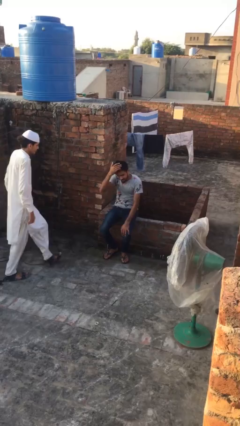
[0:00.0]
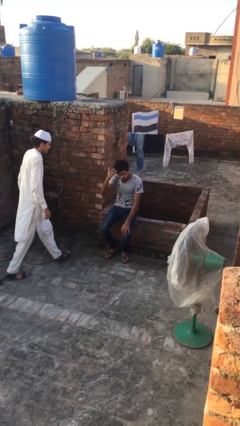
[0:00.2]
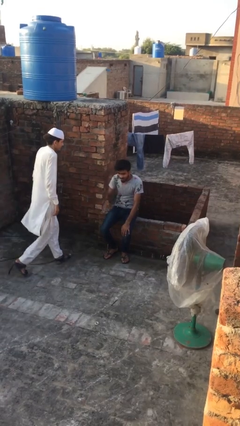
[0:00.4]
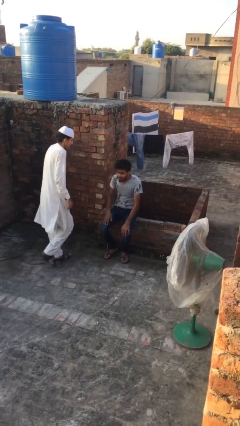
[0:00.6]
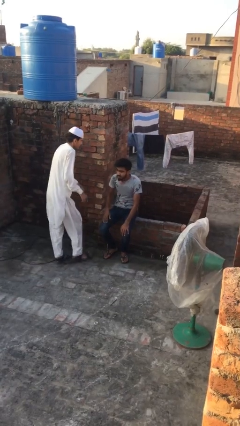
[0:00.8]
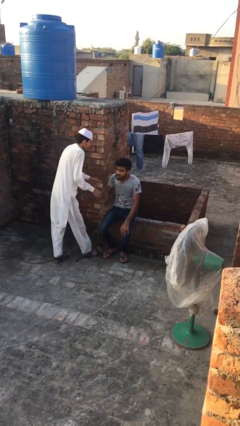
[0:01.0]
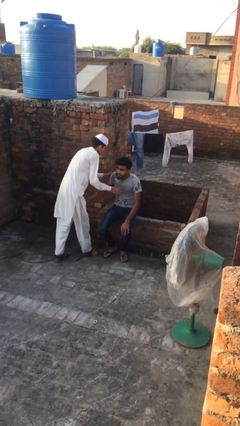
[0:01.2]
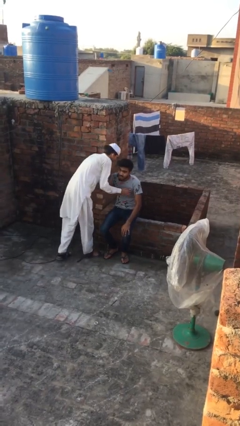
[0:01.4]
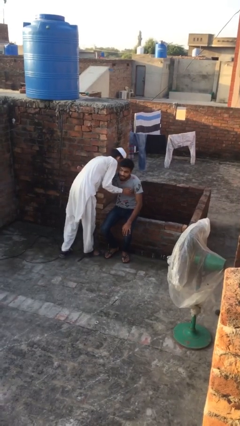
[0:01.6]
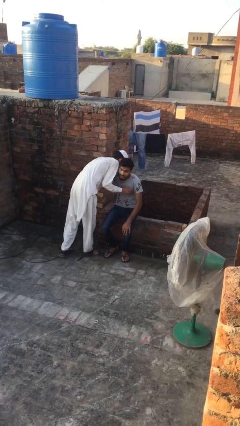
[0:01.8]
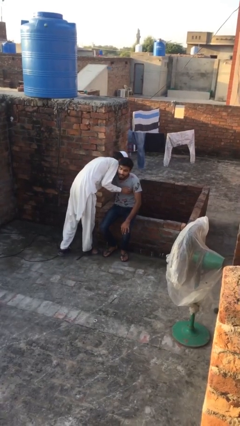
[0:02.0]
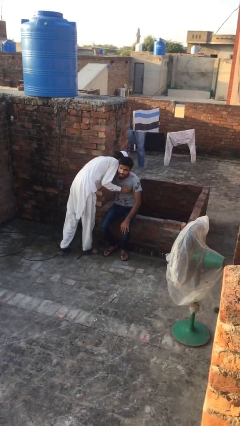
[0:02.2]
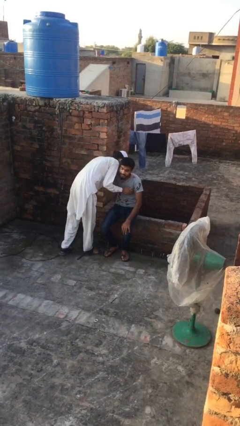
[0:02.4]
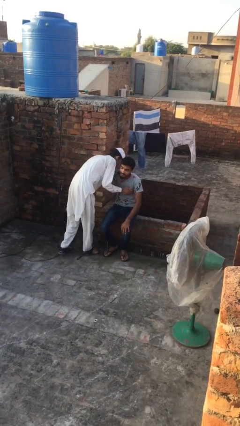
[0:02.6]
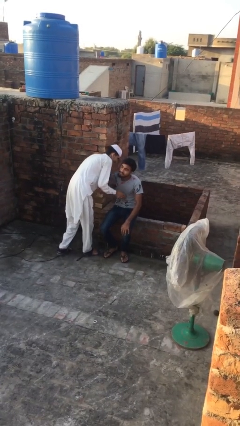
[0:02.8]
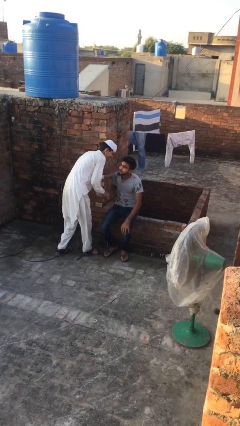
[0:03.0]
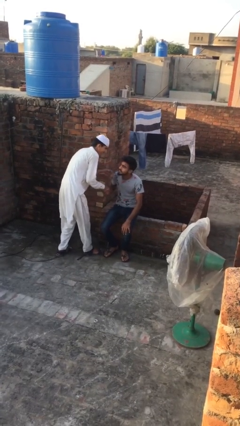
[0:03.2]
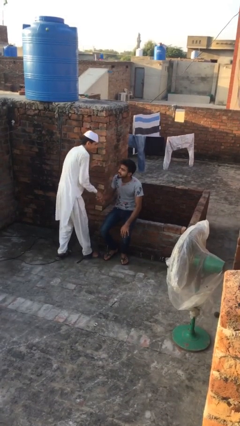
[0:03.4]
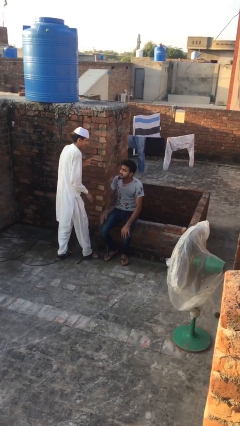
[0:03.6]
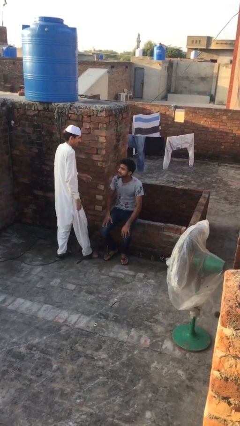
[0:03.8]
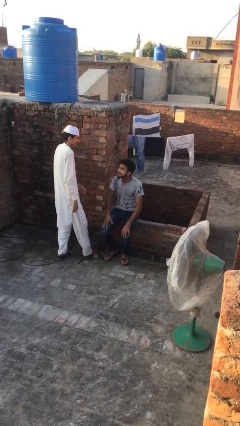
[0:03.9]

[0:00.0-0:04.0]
person embraces person

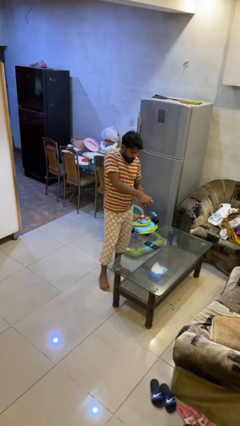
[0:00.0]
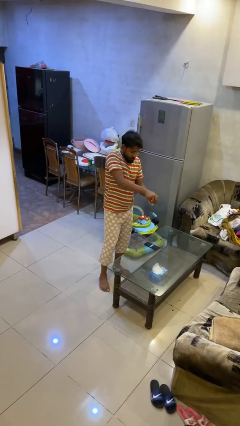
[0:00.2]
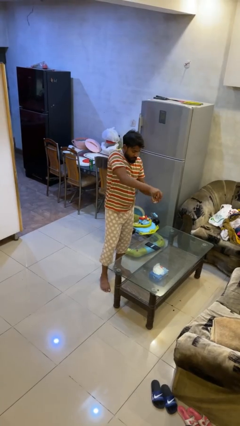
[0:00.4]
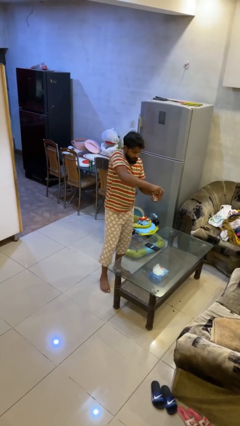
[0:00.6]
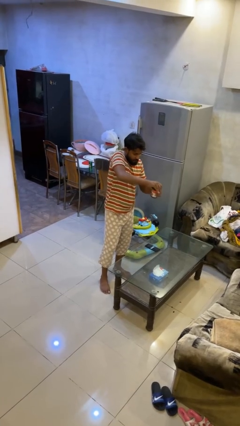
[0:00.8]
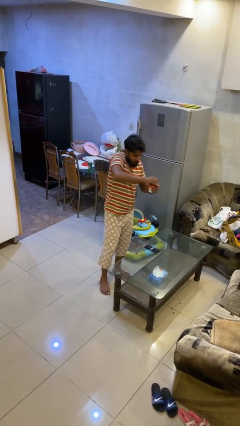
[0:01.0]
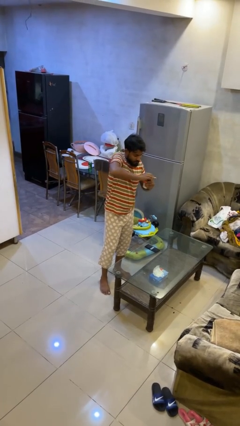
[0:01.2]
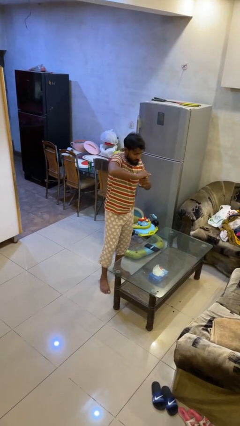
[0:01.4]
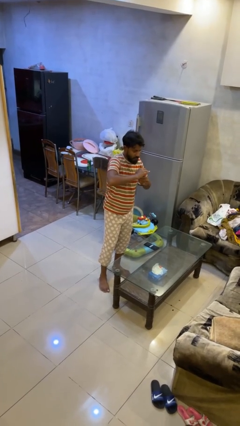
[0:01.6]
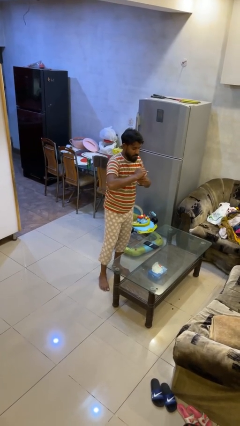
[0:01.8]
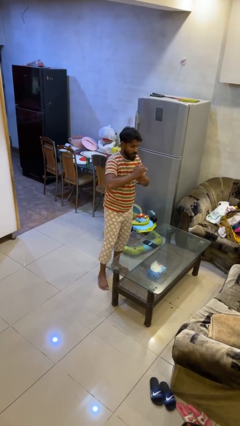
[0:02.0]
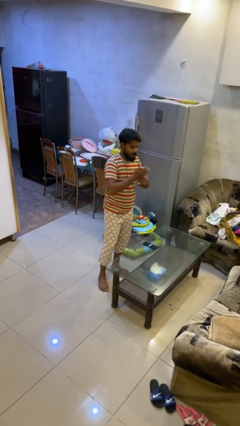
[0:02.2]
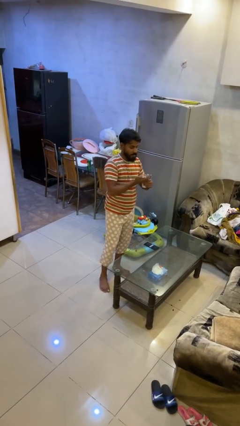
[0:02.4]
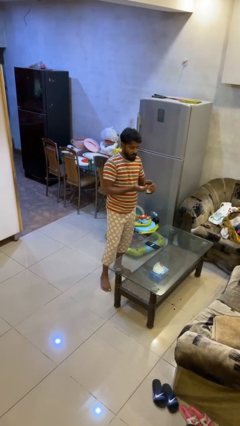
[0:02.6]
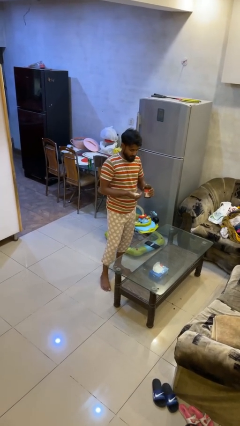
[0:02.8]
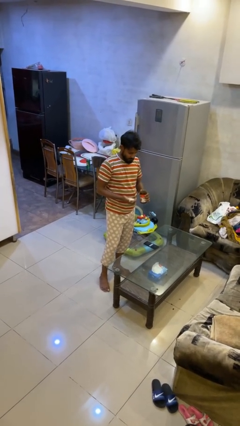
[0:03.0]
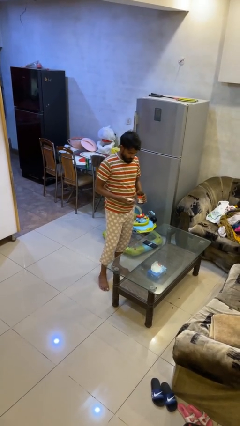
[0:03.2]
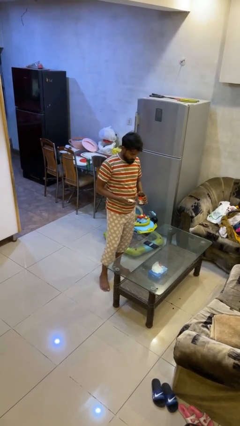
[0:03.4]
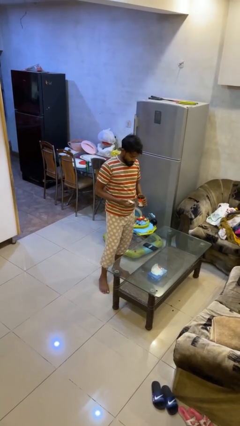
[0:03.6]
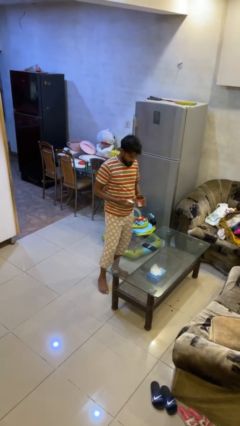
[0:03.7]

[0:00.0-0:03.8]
person opens jar

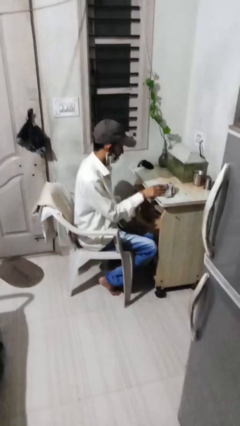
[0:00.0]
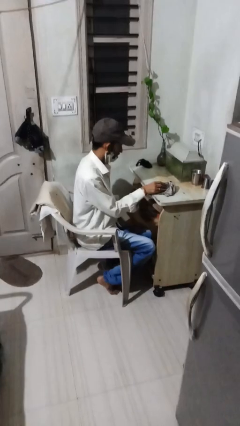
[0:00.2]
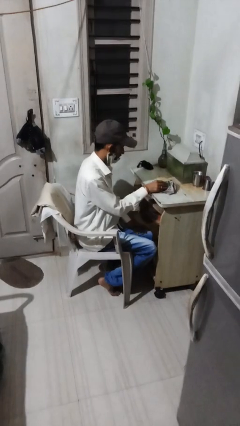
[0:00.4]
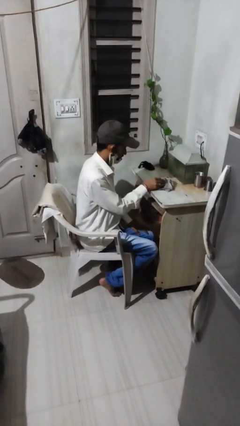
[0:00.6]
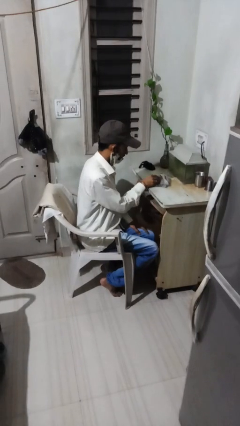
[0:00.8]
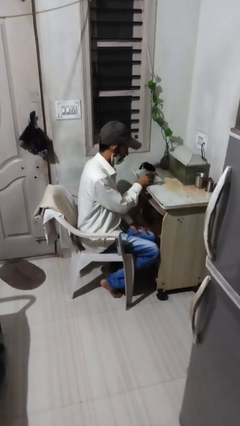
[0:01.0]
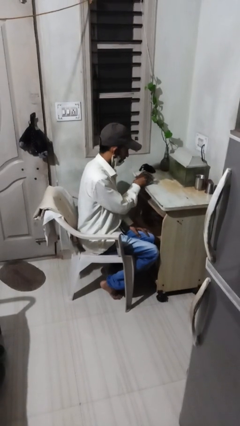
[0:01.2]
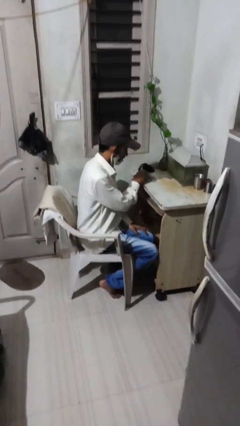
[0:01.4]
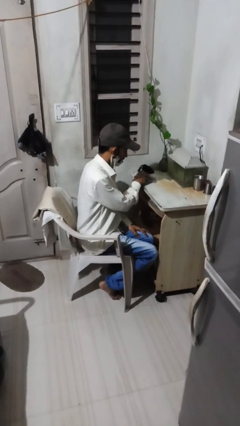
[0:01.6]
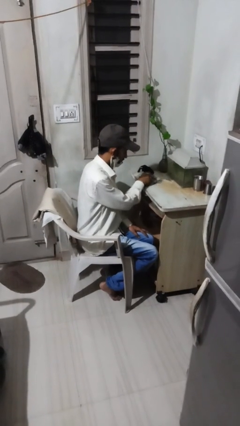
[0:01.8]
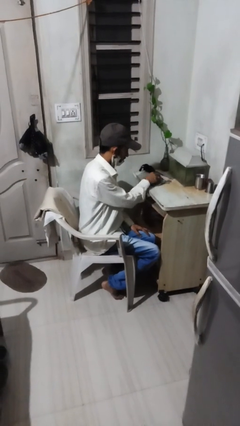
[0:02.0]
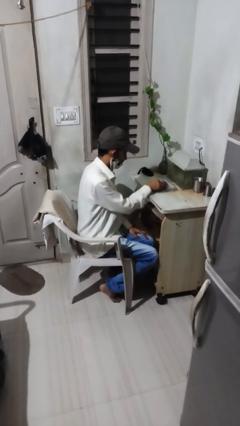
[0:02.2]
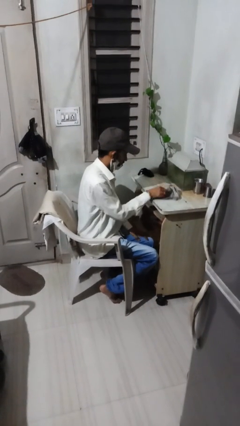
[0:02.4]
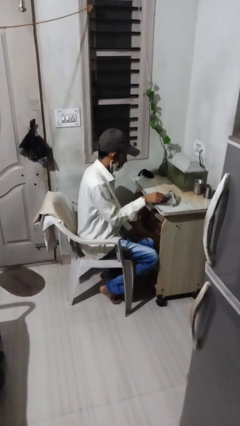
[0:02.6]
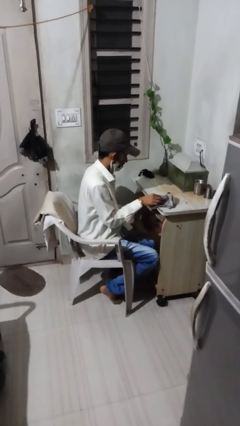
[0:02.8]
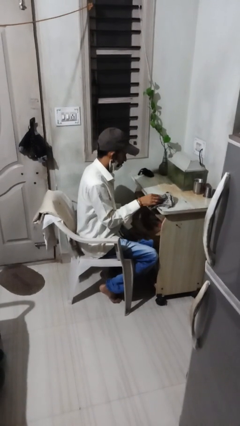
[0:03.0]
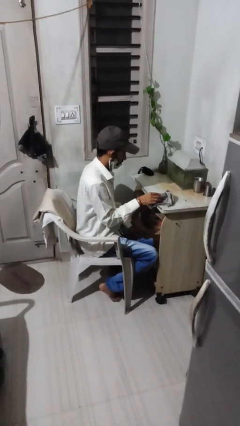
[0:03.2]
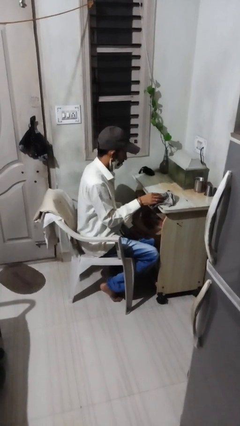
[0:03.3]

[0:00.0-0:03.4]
person cleans table with rag

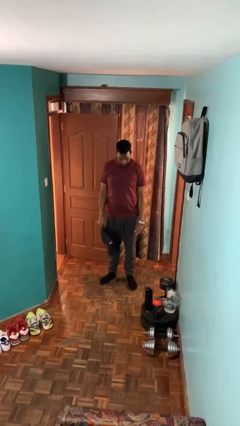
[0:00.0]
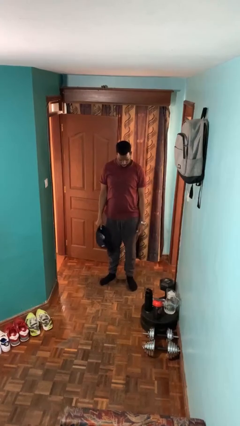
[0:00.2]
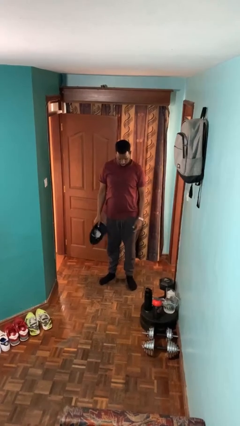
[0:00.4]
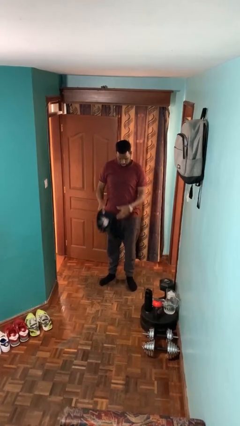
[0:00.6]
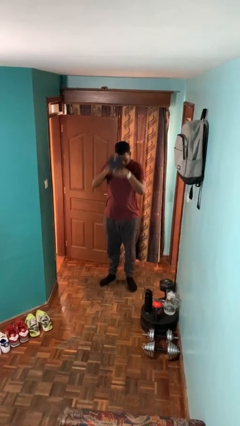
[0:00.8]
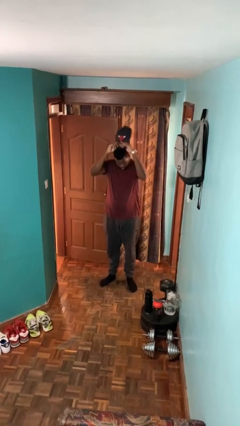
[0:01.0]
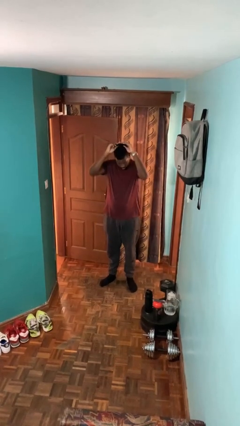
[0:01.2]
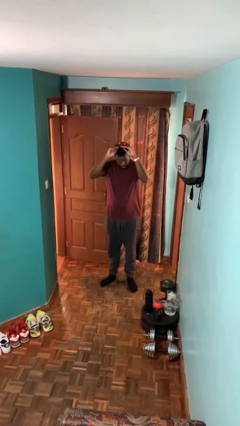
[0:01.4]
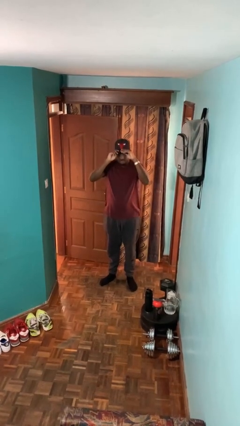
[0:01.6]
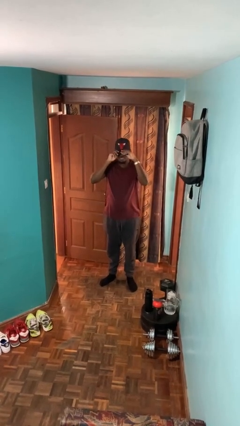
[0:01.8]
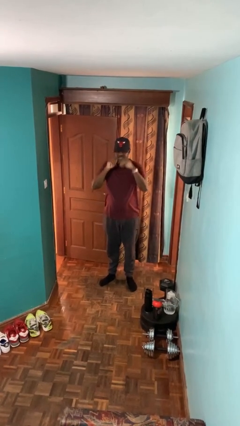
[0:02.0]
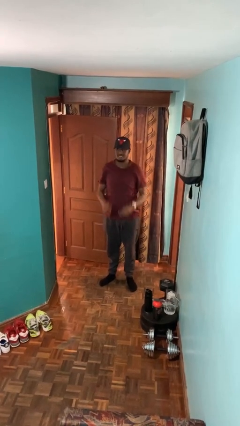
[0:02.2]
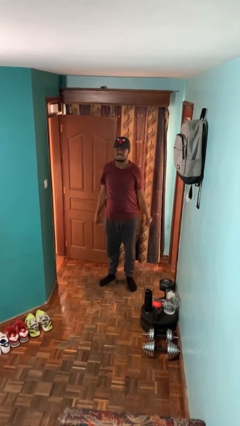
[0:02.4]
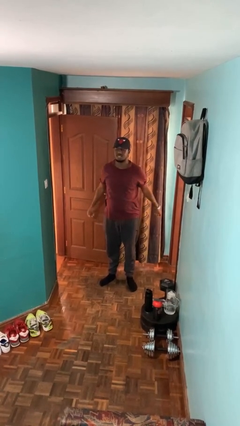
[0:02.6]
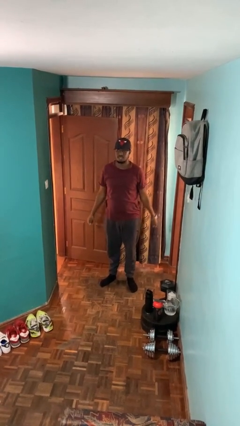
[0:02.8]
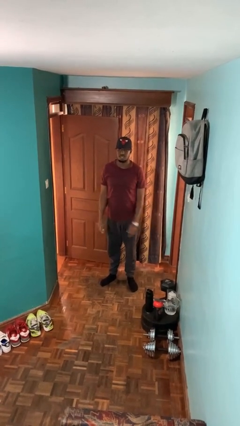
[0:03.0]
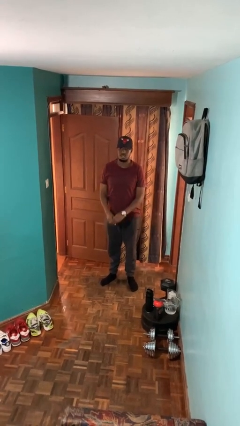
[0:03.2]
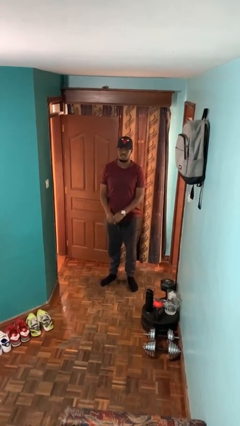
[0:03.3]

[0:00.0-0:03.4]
person puts on hat

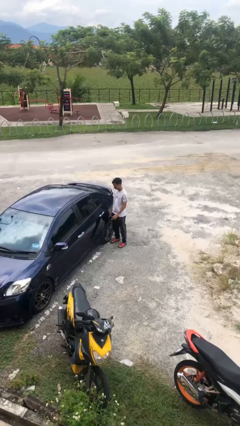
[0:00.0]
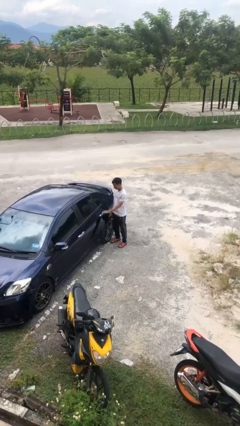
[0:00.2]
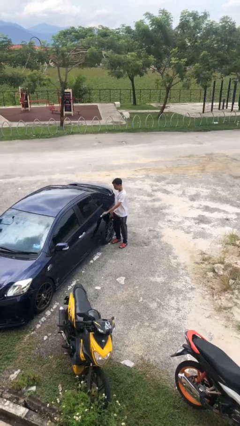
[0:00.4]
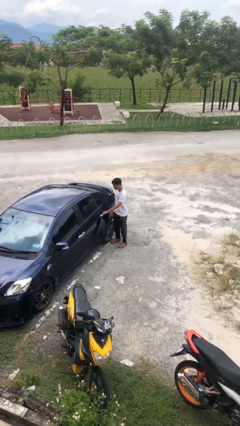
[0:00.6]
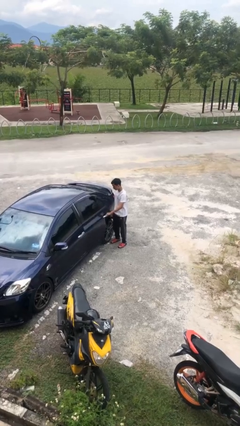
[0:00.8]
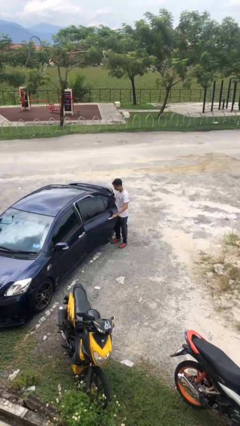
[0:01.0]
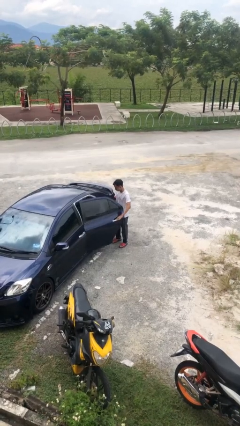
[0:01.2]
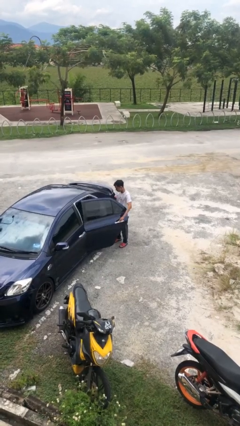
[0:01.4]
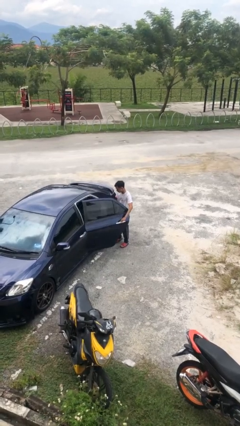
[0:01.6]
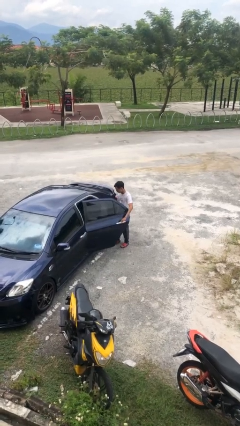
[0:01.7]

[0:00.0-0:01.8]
person opens car door

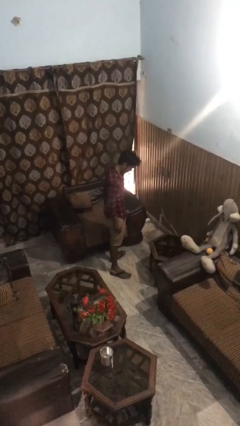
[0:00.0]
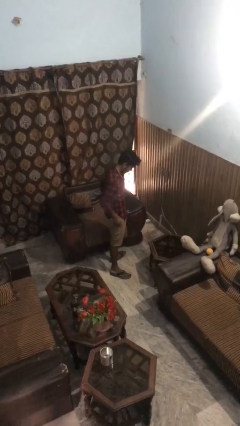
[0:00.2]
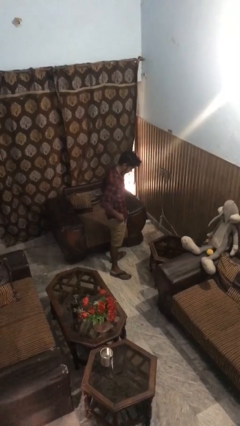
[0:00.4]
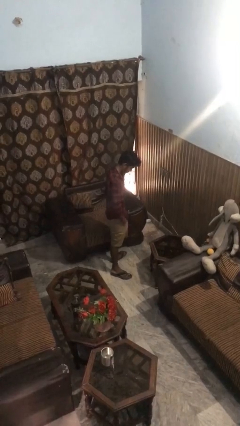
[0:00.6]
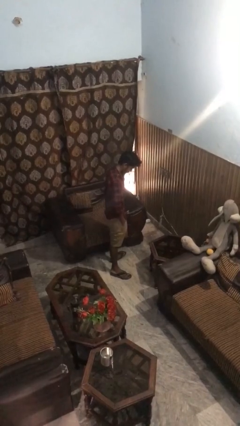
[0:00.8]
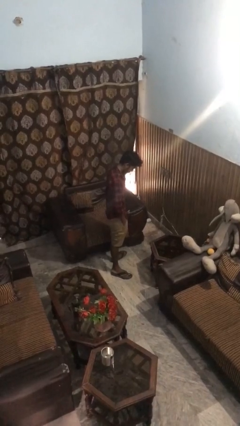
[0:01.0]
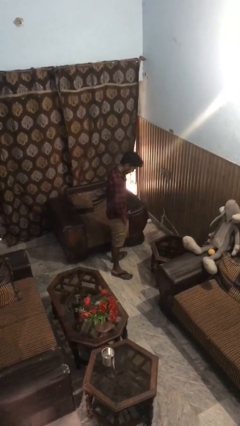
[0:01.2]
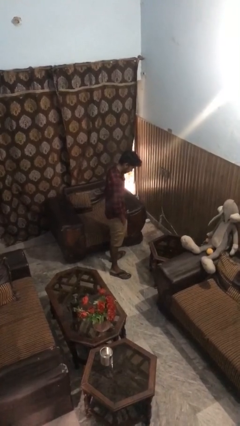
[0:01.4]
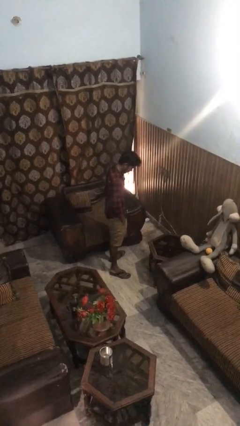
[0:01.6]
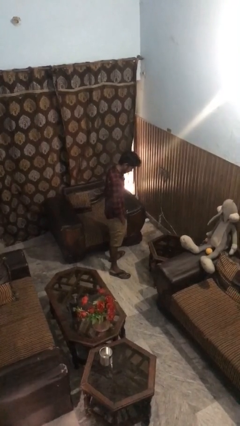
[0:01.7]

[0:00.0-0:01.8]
person puts hands in back pockets
